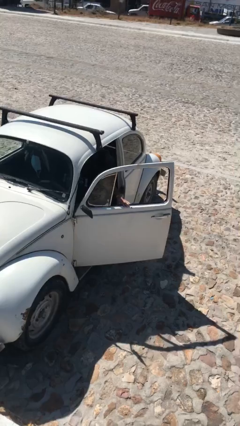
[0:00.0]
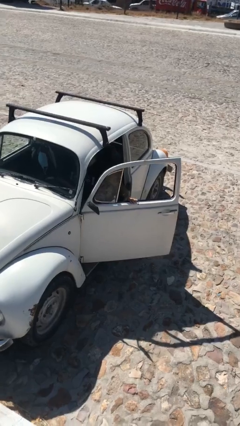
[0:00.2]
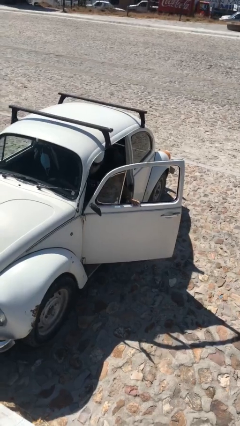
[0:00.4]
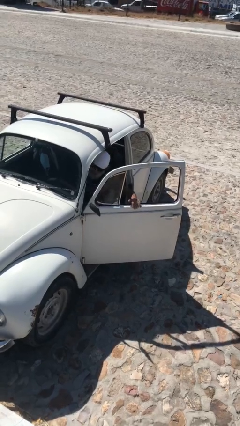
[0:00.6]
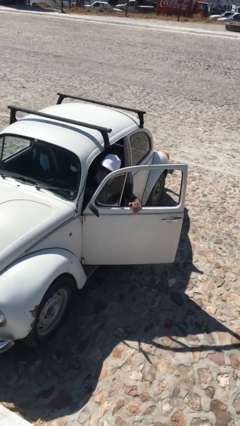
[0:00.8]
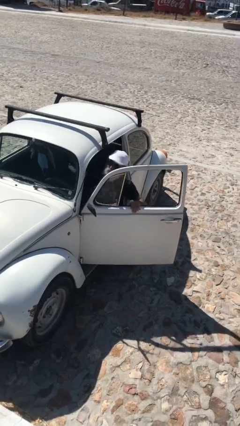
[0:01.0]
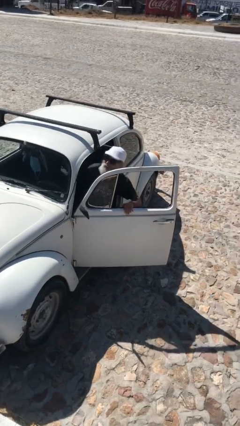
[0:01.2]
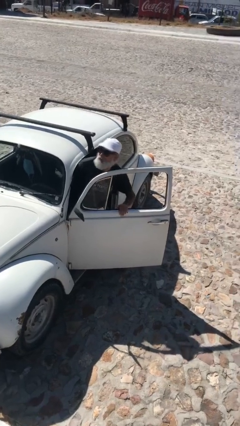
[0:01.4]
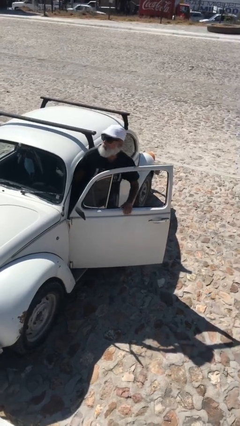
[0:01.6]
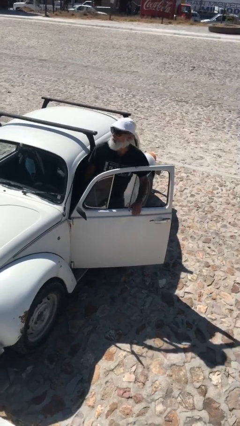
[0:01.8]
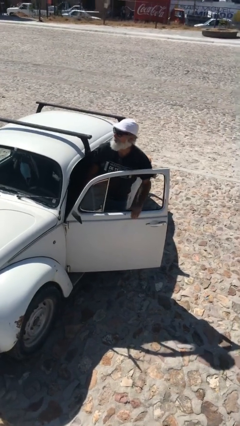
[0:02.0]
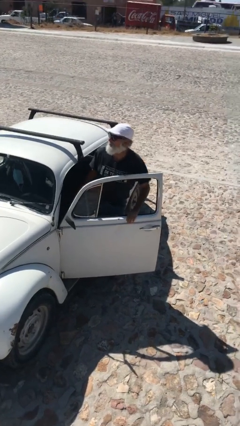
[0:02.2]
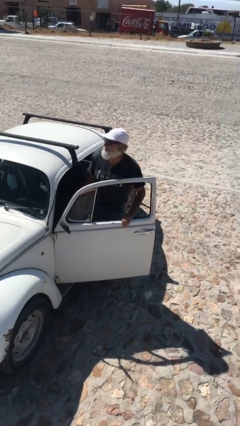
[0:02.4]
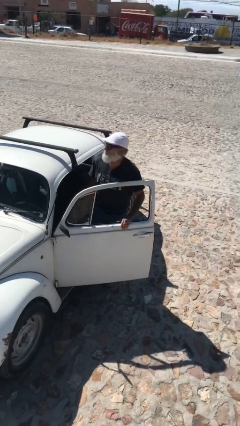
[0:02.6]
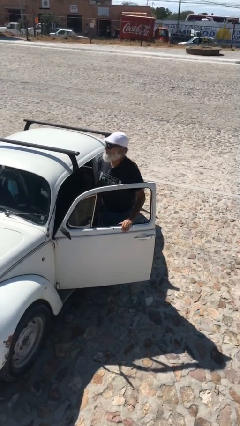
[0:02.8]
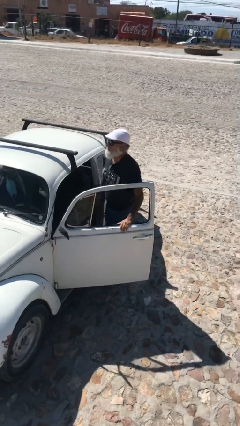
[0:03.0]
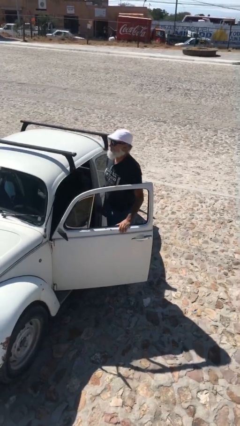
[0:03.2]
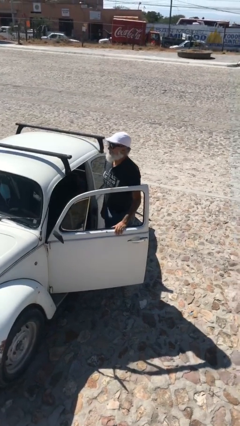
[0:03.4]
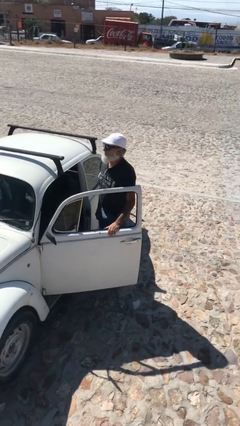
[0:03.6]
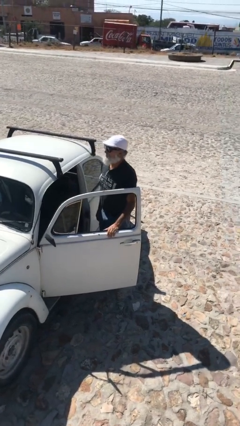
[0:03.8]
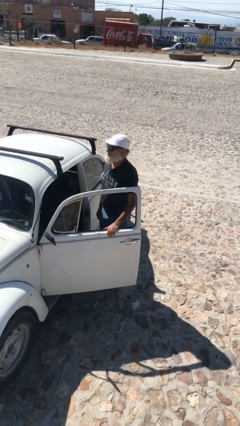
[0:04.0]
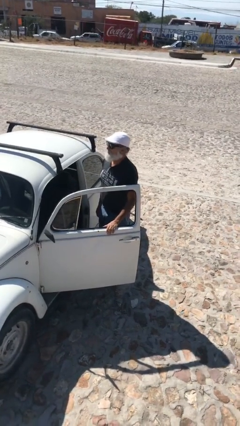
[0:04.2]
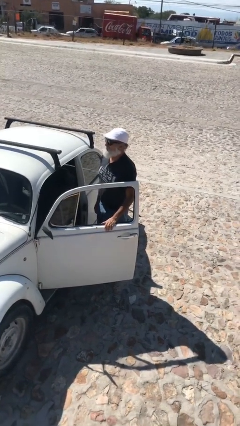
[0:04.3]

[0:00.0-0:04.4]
person exits car

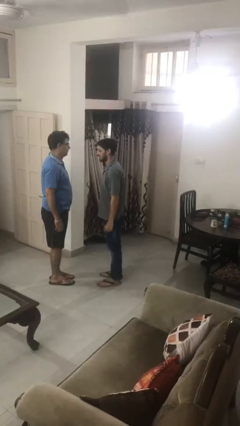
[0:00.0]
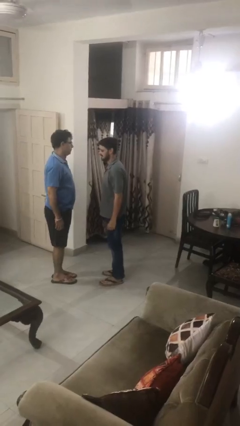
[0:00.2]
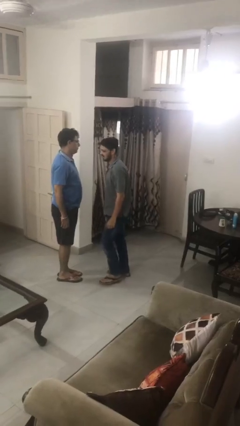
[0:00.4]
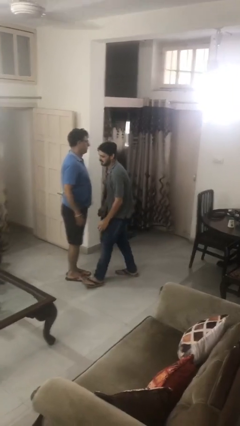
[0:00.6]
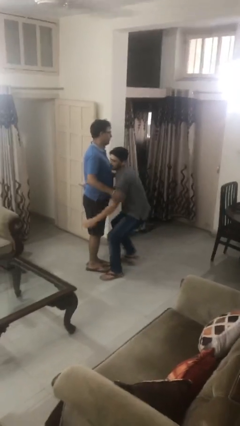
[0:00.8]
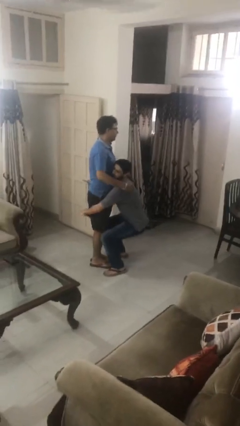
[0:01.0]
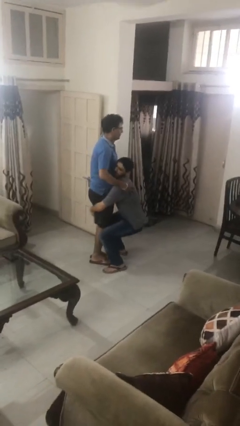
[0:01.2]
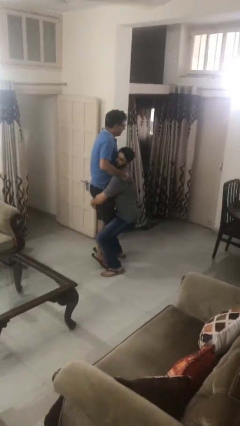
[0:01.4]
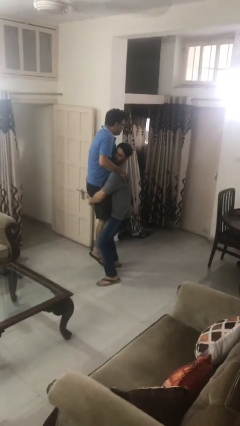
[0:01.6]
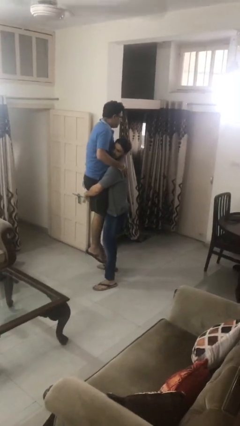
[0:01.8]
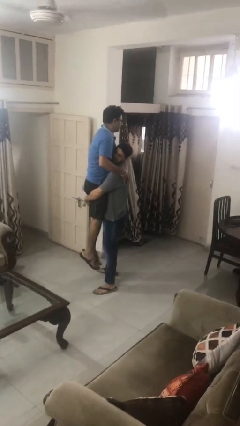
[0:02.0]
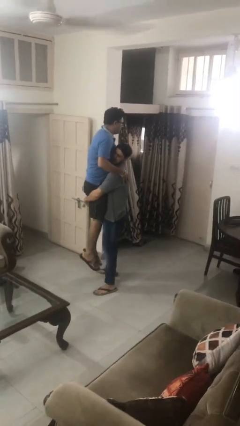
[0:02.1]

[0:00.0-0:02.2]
person picks up person

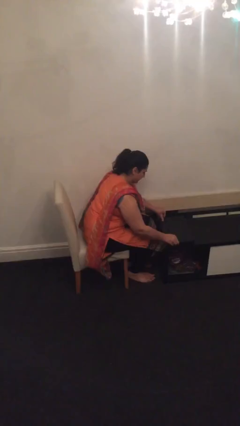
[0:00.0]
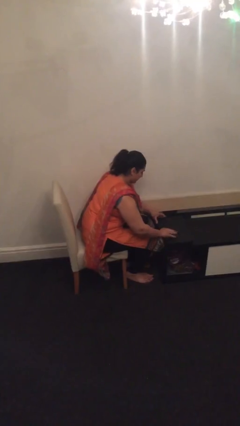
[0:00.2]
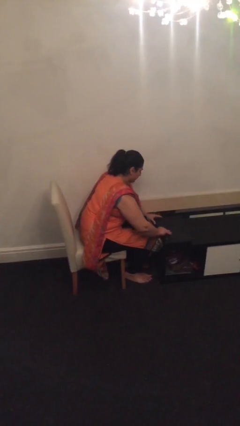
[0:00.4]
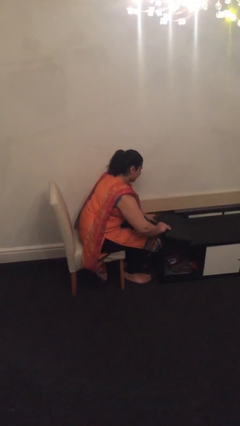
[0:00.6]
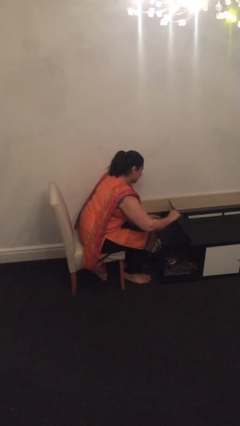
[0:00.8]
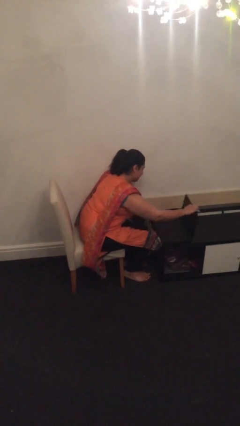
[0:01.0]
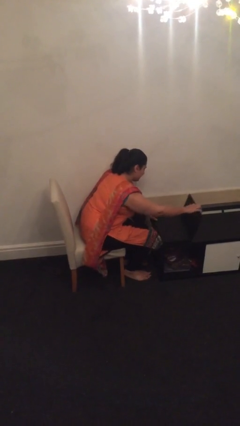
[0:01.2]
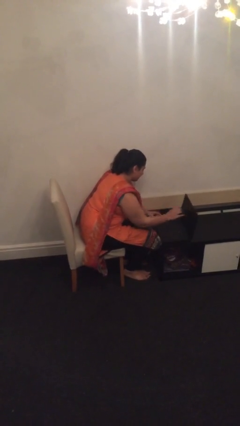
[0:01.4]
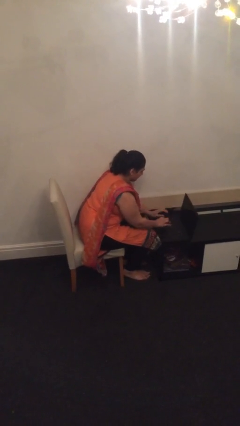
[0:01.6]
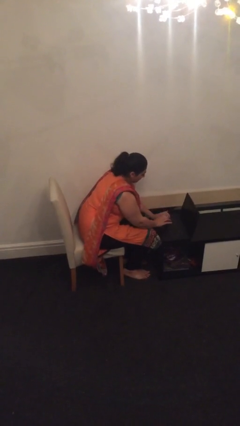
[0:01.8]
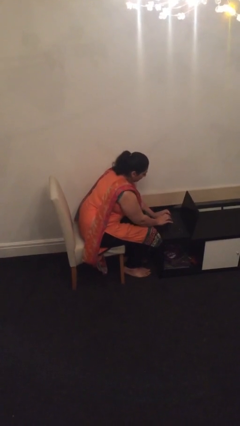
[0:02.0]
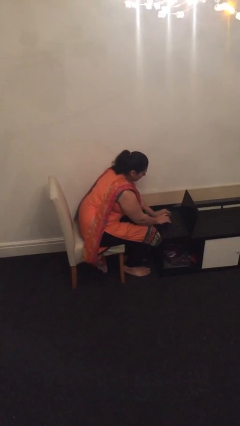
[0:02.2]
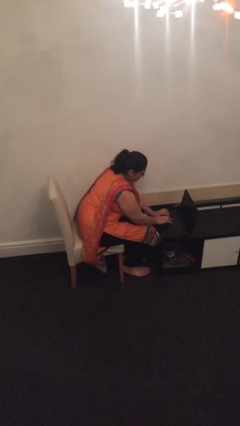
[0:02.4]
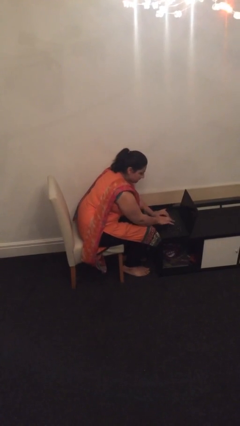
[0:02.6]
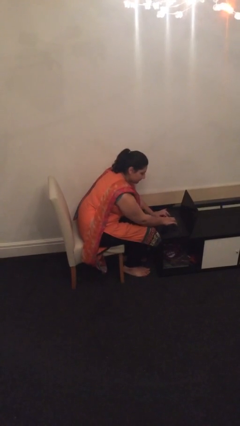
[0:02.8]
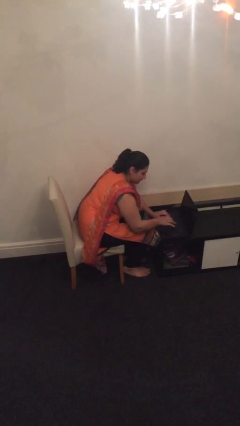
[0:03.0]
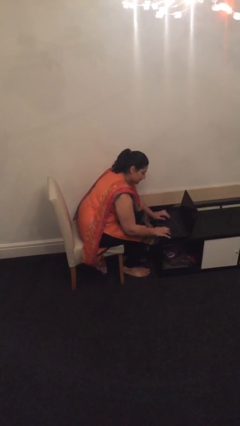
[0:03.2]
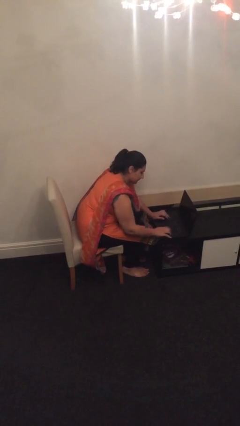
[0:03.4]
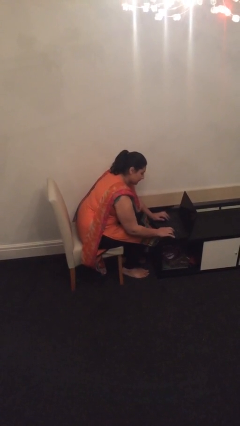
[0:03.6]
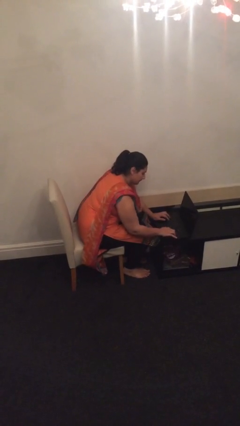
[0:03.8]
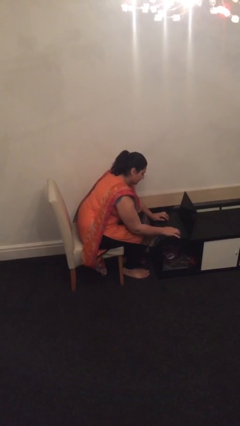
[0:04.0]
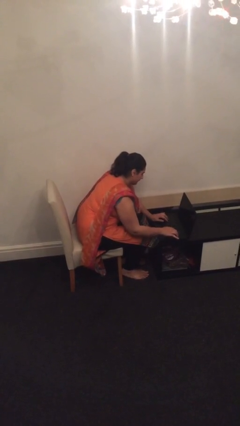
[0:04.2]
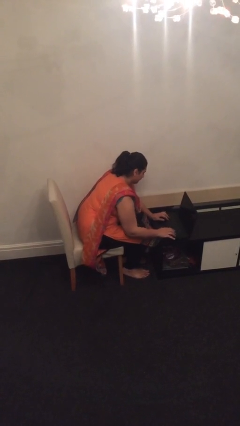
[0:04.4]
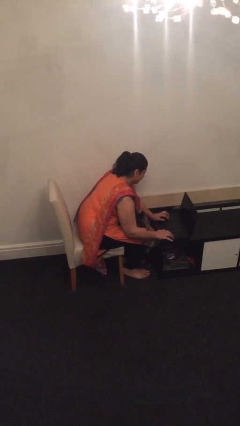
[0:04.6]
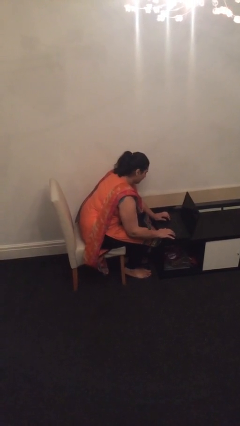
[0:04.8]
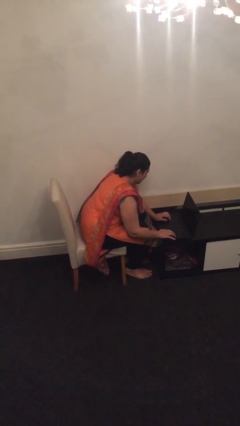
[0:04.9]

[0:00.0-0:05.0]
person interacts with laptop

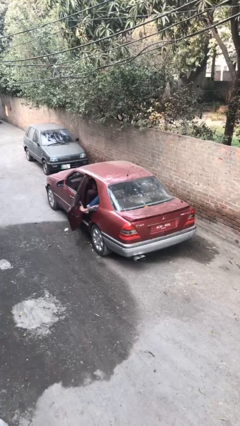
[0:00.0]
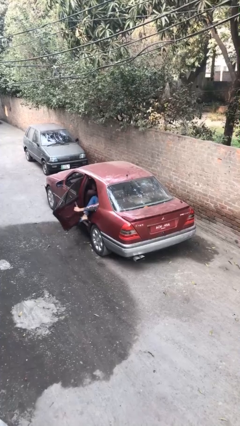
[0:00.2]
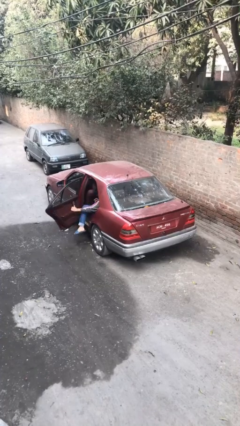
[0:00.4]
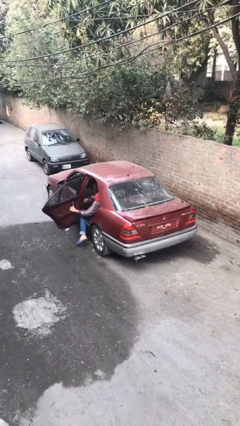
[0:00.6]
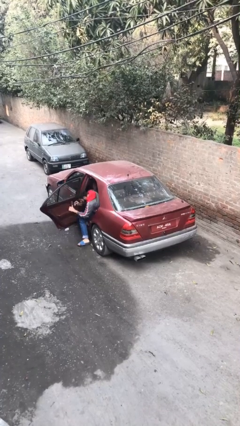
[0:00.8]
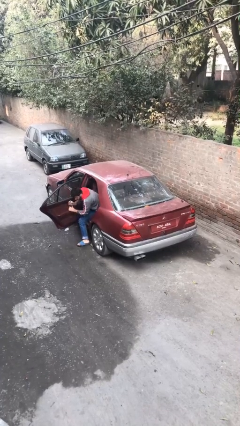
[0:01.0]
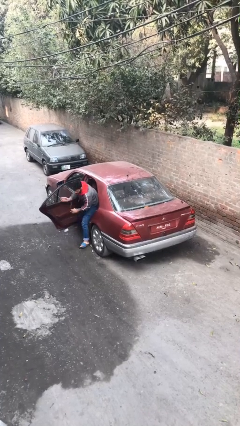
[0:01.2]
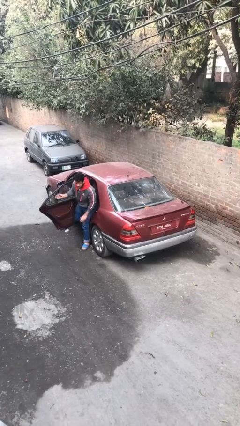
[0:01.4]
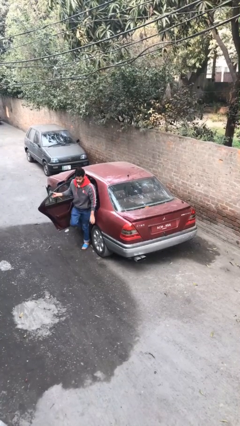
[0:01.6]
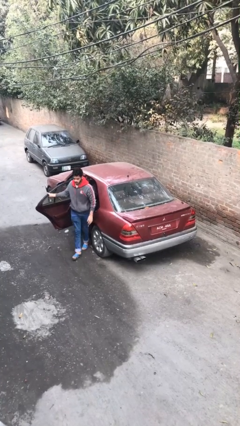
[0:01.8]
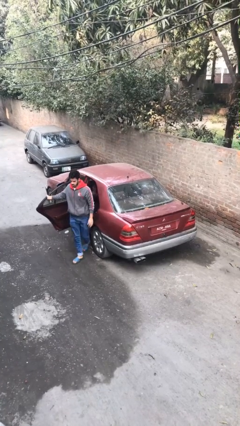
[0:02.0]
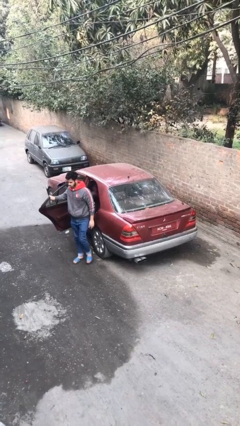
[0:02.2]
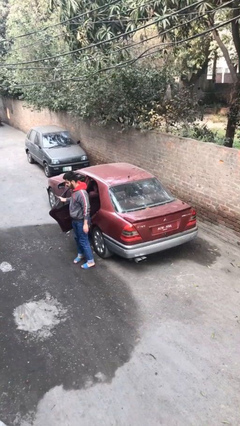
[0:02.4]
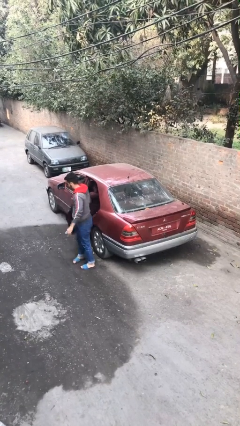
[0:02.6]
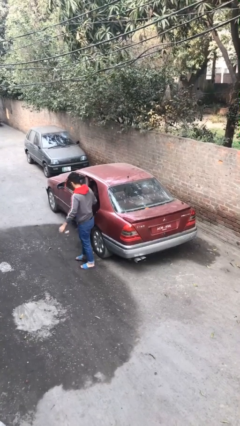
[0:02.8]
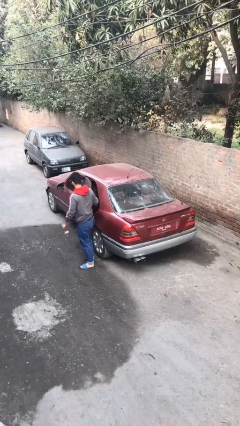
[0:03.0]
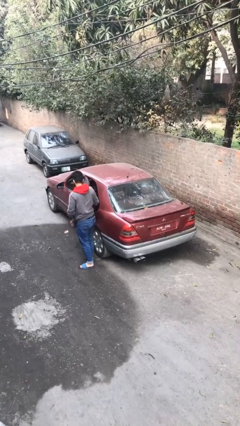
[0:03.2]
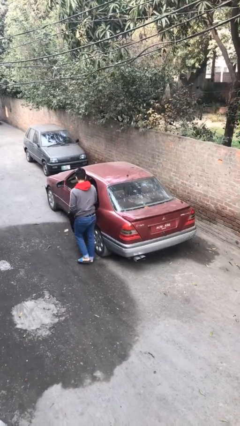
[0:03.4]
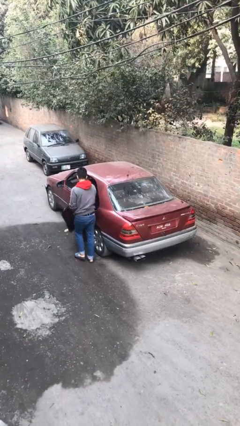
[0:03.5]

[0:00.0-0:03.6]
car drops off person

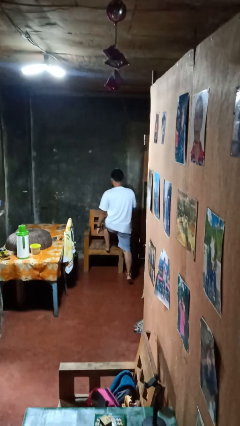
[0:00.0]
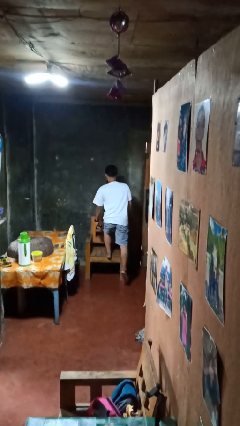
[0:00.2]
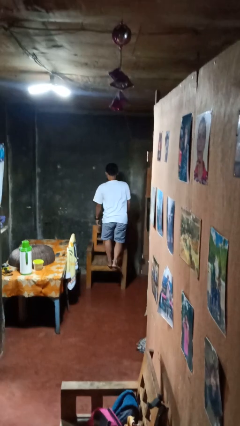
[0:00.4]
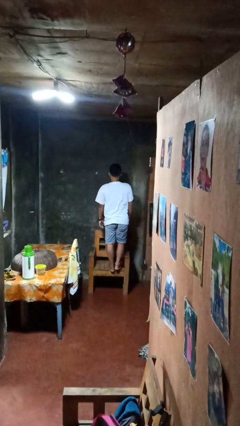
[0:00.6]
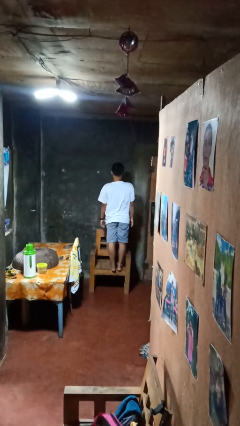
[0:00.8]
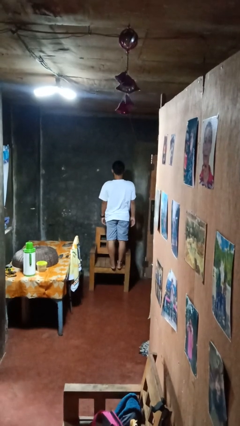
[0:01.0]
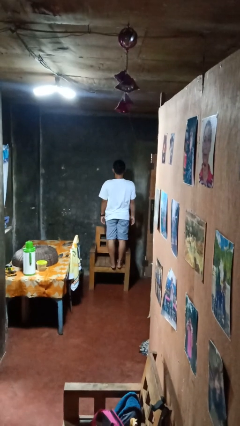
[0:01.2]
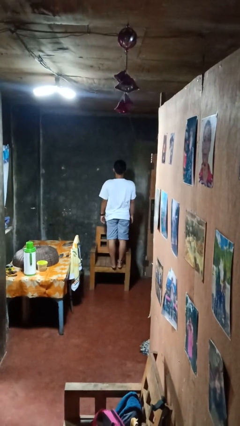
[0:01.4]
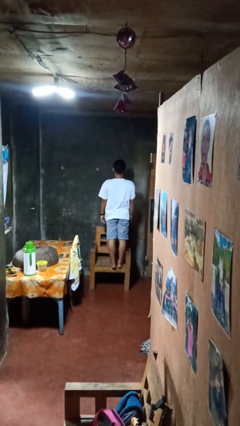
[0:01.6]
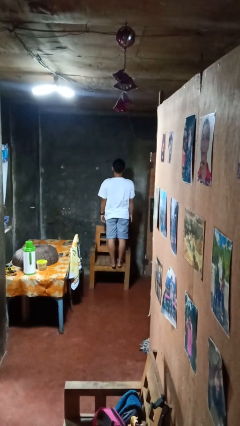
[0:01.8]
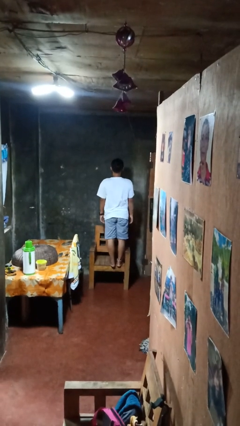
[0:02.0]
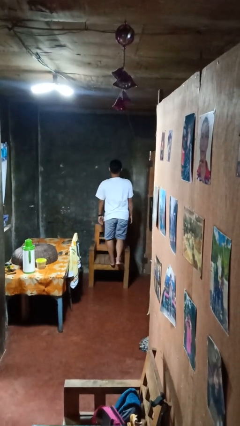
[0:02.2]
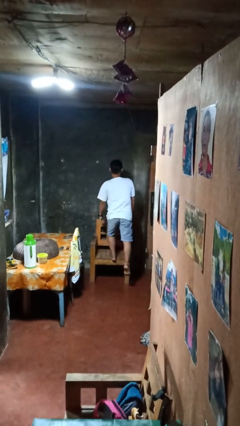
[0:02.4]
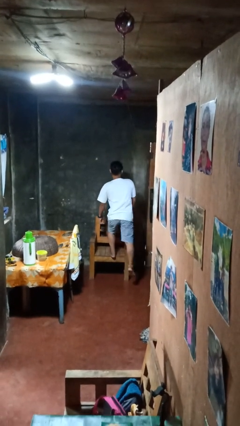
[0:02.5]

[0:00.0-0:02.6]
person climbs on chair
